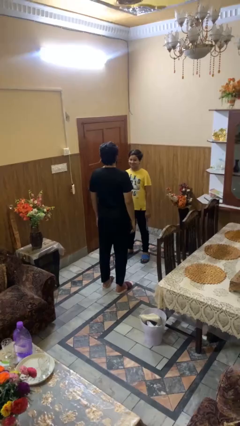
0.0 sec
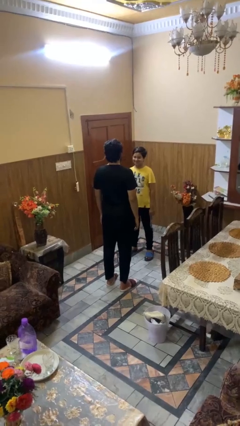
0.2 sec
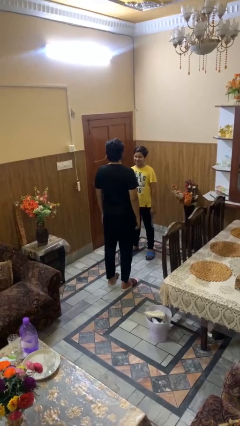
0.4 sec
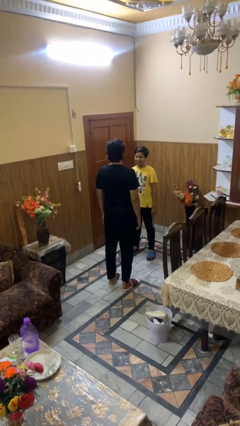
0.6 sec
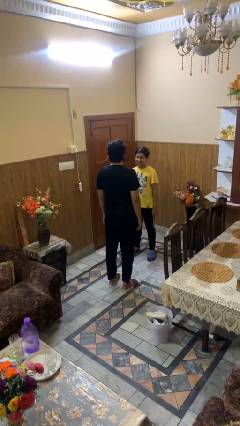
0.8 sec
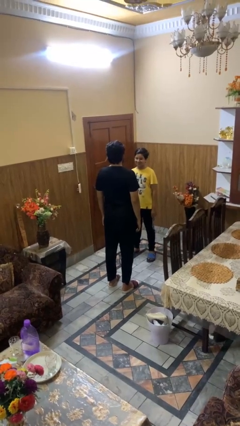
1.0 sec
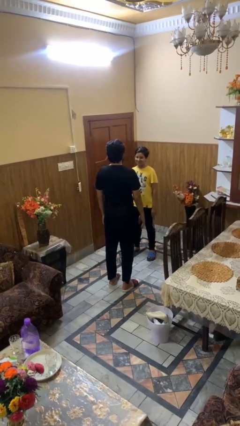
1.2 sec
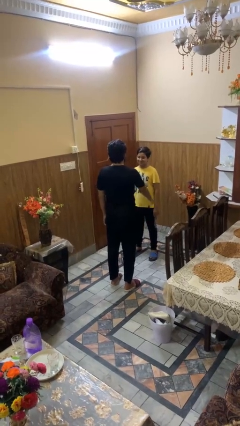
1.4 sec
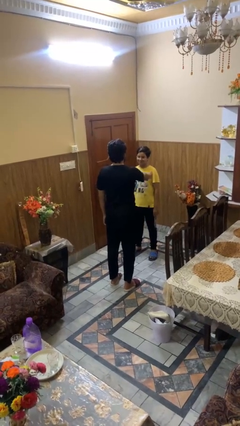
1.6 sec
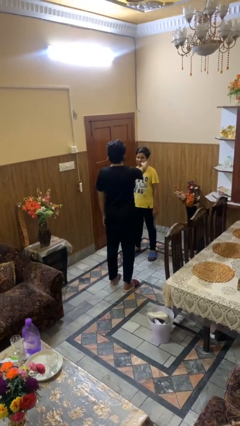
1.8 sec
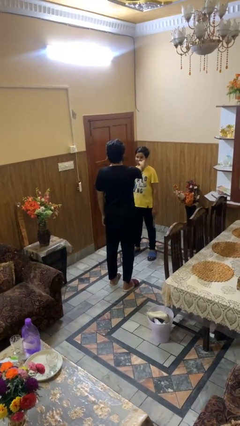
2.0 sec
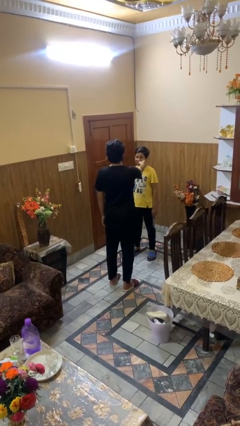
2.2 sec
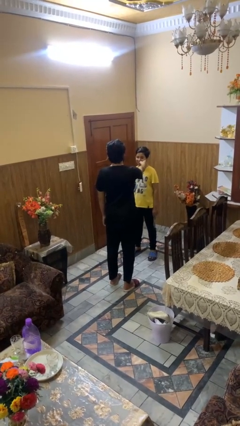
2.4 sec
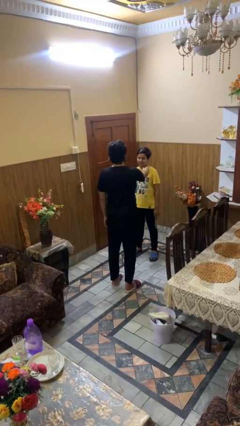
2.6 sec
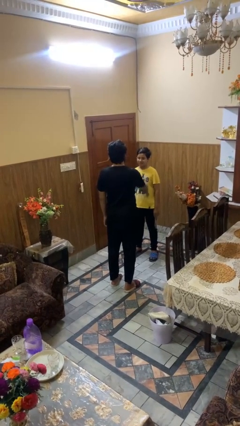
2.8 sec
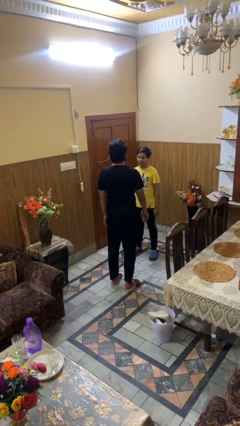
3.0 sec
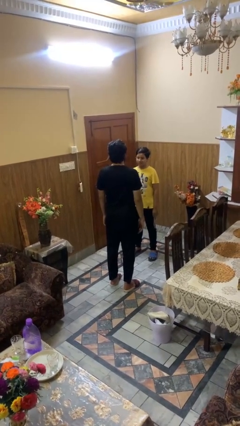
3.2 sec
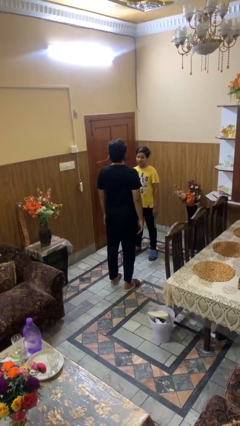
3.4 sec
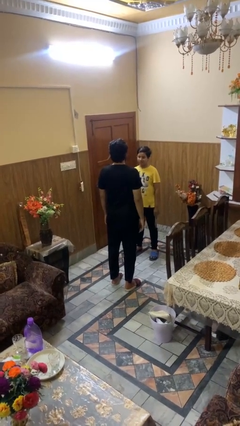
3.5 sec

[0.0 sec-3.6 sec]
person touches face of person

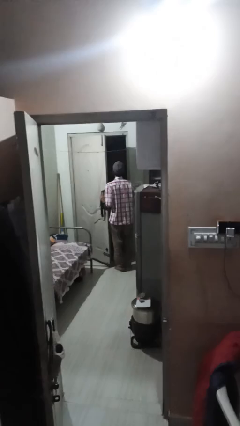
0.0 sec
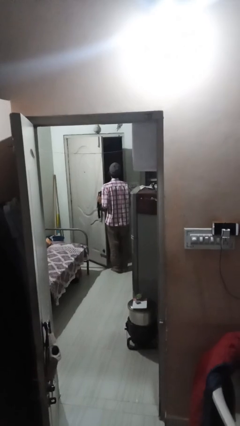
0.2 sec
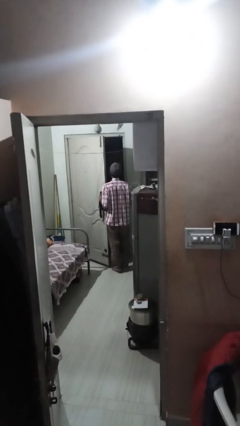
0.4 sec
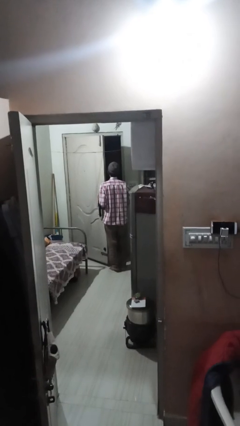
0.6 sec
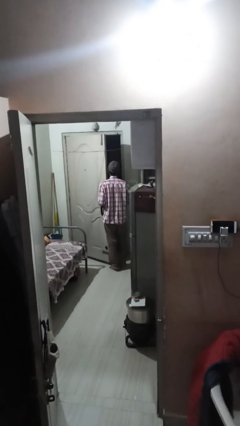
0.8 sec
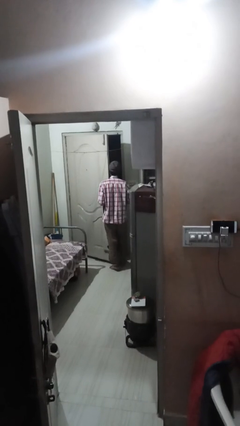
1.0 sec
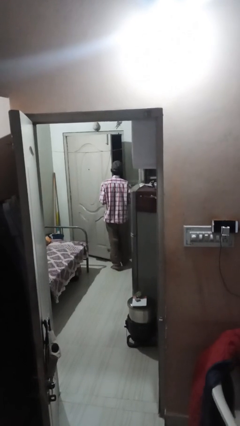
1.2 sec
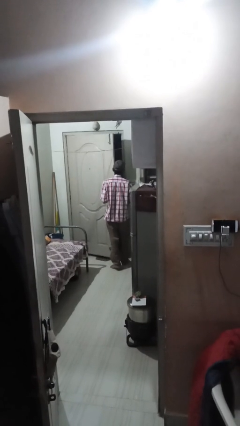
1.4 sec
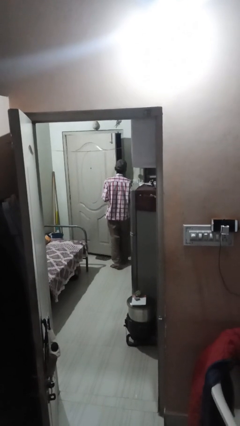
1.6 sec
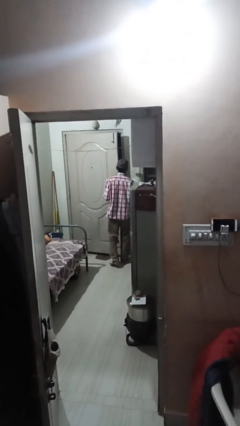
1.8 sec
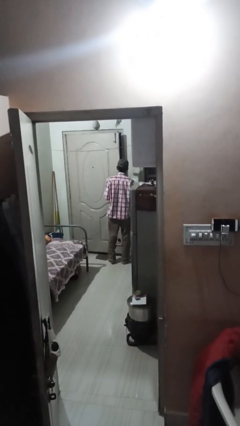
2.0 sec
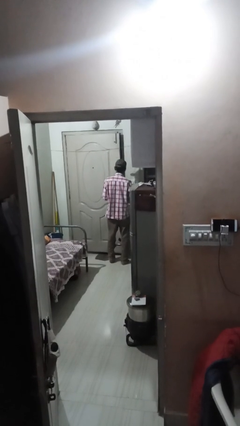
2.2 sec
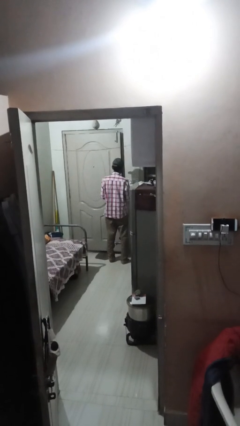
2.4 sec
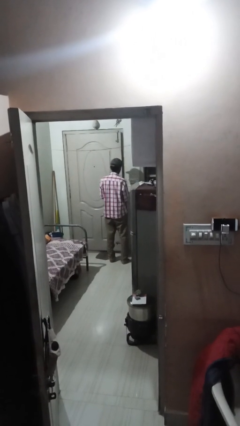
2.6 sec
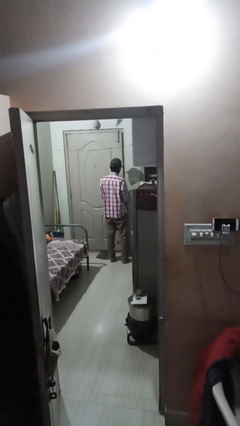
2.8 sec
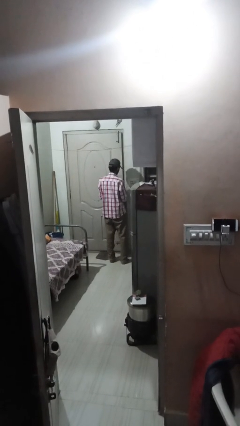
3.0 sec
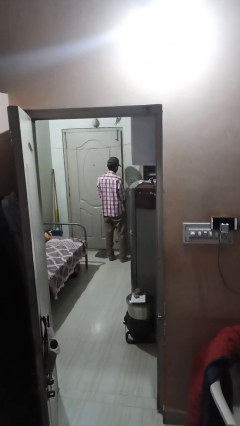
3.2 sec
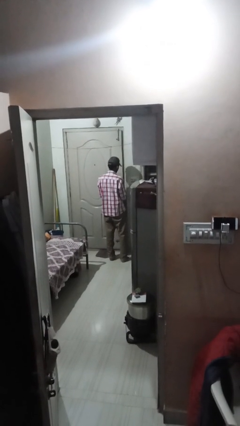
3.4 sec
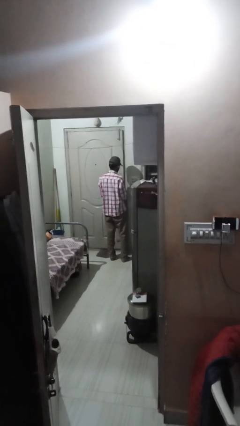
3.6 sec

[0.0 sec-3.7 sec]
person closes facility door

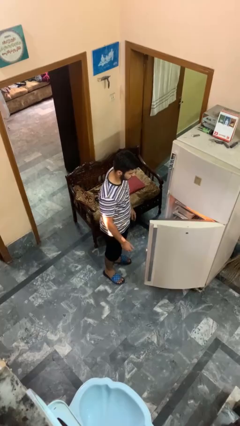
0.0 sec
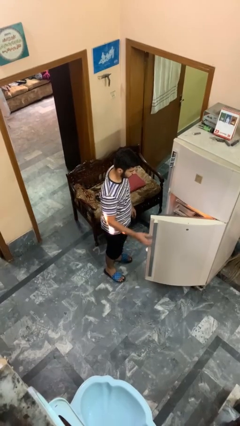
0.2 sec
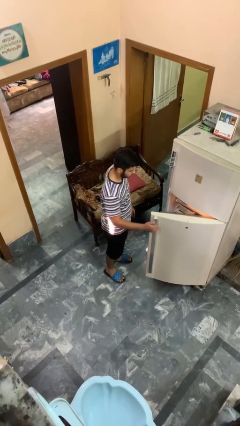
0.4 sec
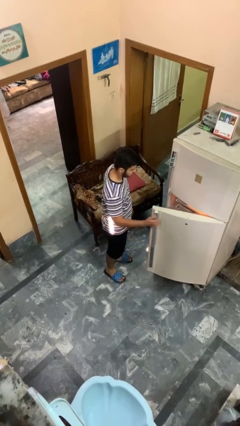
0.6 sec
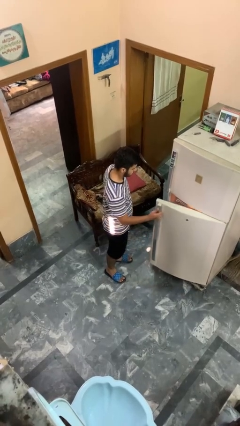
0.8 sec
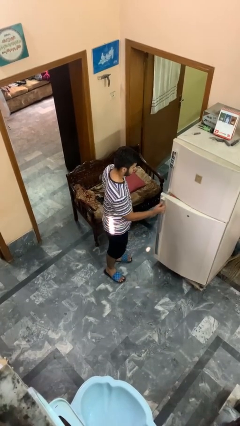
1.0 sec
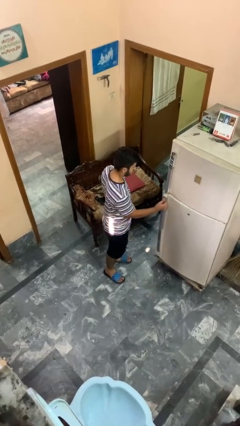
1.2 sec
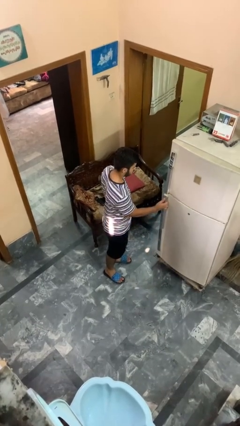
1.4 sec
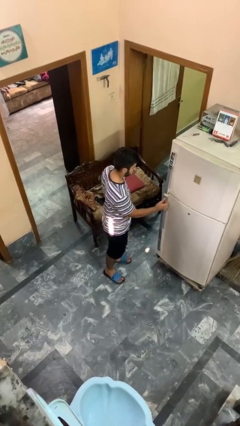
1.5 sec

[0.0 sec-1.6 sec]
person closes refrigerator

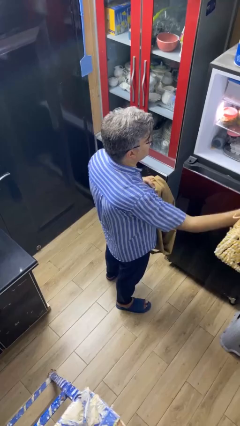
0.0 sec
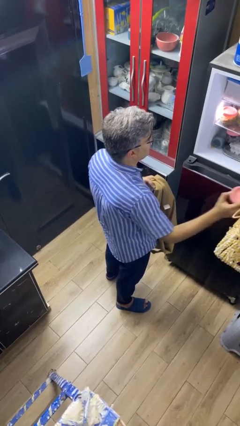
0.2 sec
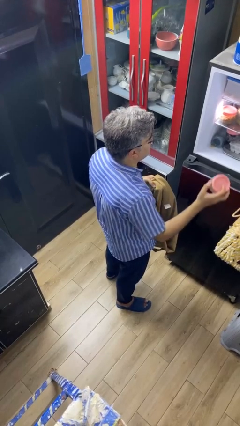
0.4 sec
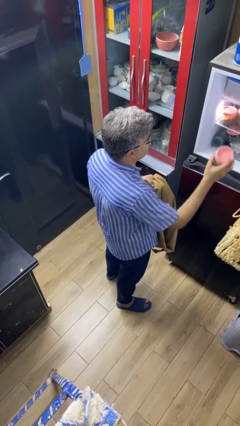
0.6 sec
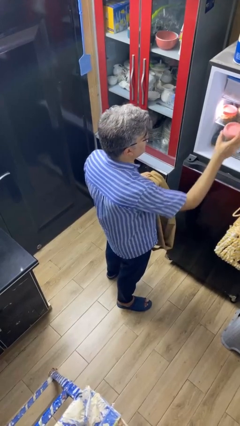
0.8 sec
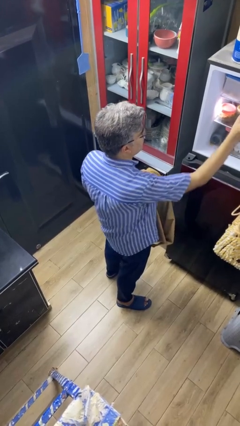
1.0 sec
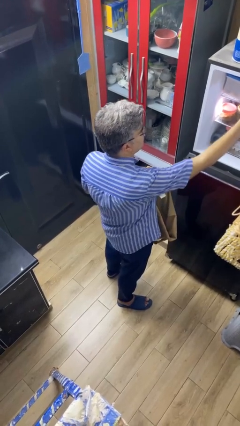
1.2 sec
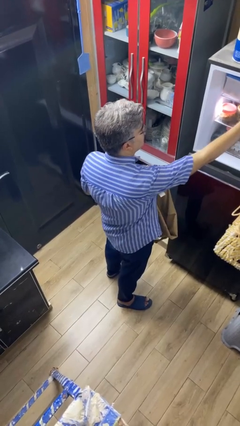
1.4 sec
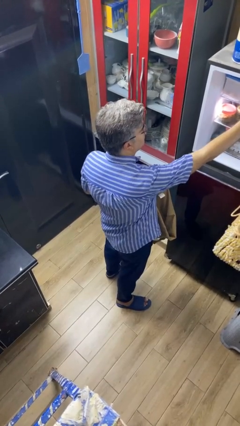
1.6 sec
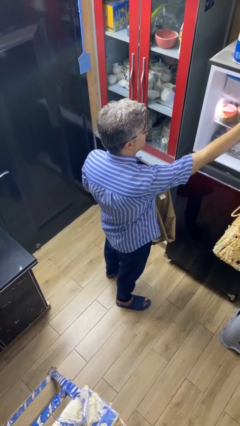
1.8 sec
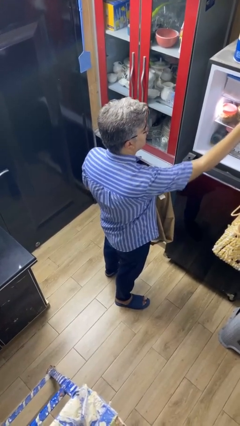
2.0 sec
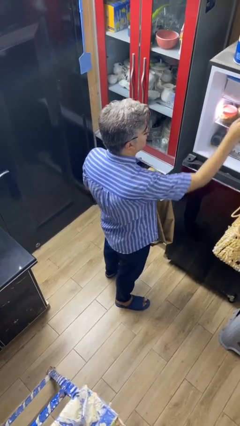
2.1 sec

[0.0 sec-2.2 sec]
person loads groceries into refrigerator

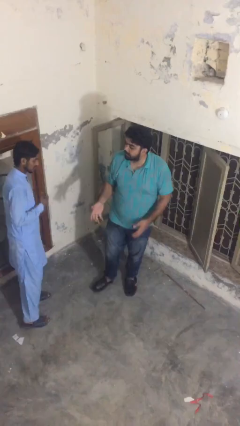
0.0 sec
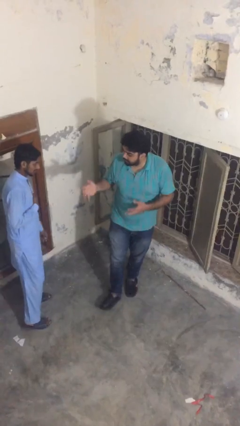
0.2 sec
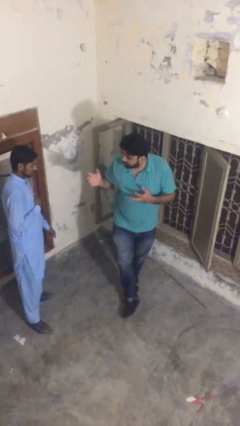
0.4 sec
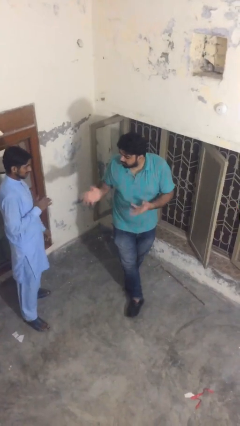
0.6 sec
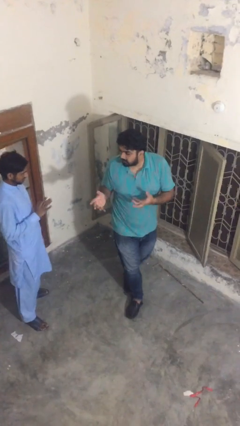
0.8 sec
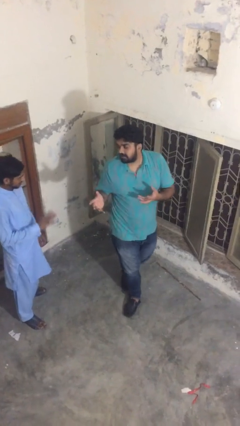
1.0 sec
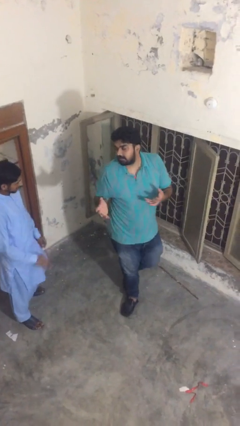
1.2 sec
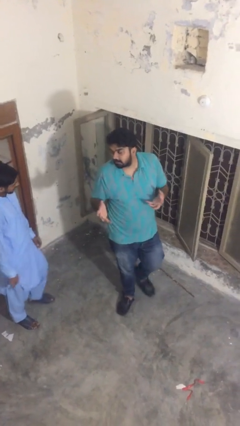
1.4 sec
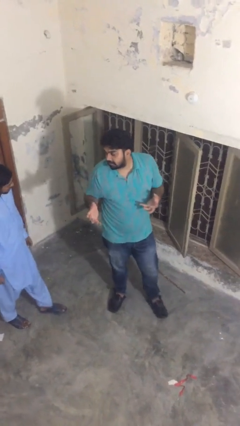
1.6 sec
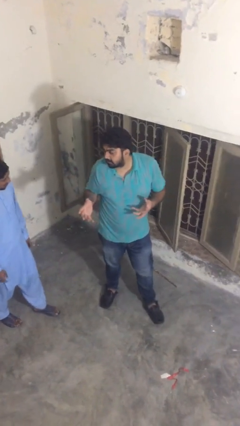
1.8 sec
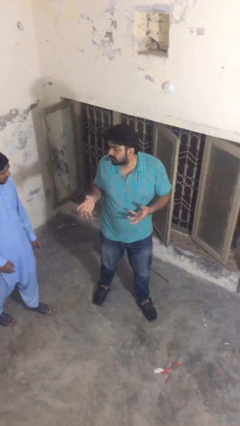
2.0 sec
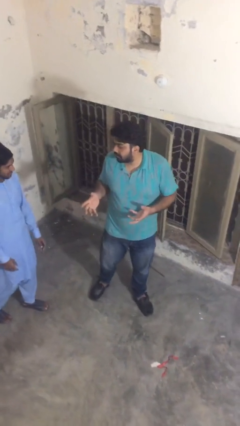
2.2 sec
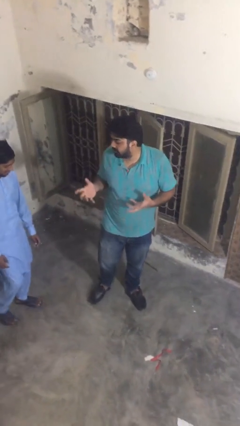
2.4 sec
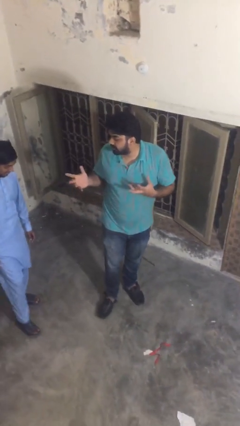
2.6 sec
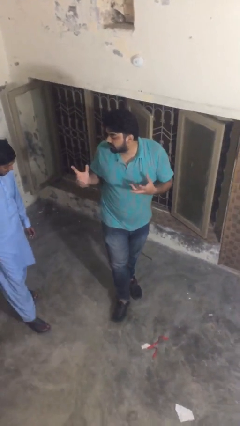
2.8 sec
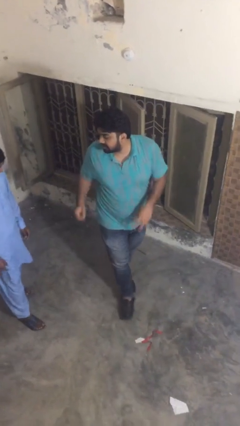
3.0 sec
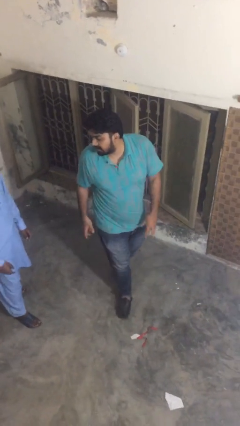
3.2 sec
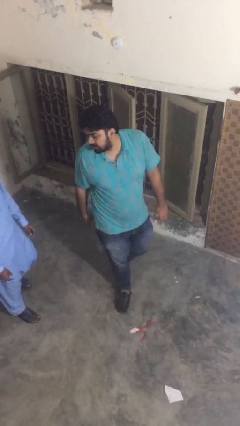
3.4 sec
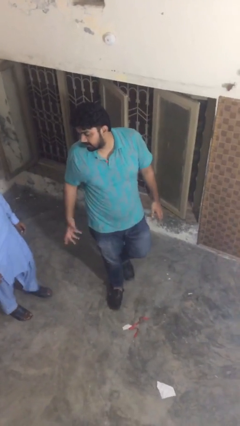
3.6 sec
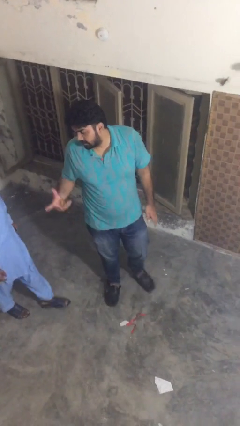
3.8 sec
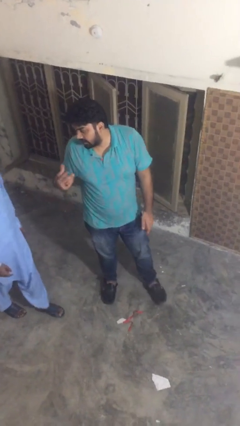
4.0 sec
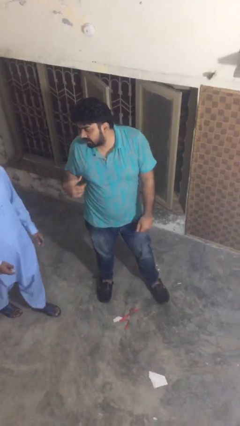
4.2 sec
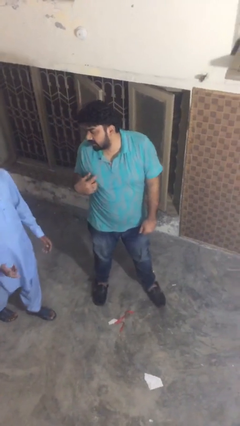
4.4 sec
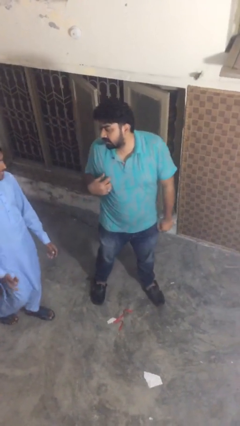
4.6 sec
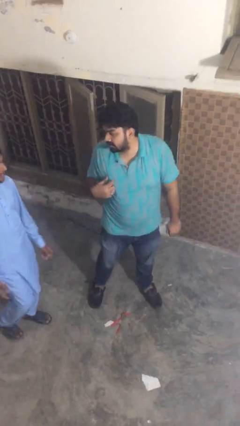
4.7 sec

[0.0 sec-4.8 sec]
person talks to person

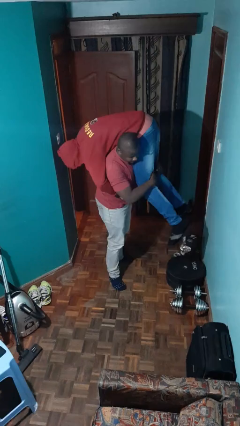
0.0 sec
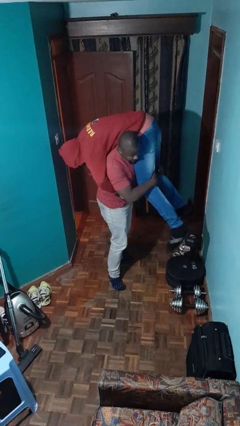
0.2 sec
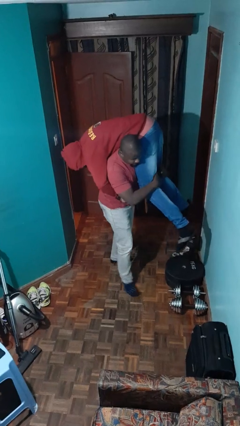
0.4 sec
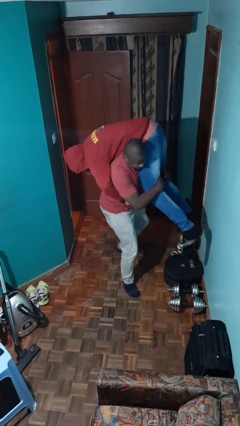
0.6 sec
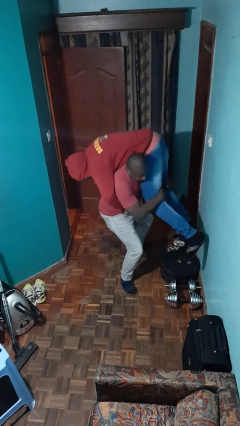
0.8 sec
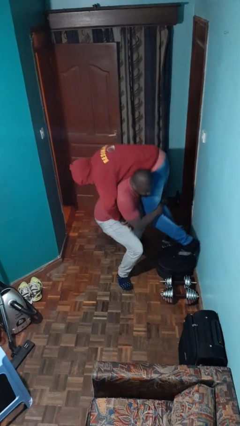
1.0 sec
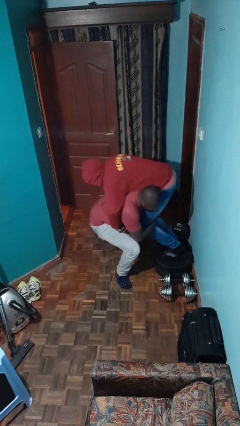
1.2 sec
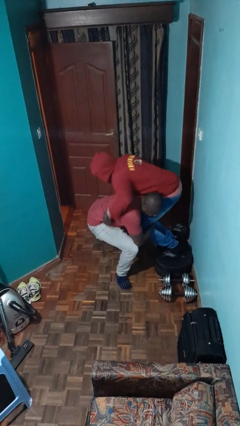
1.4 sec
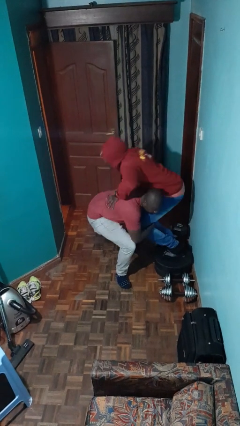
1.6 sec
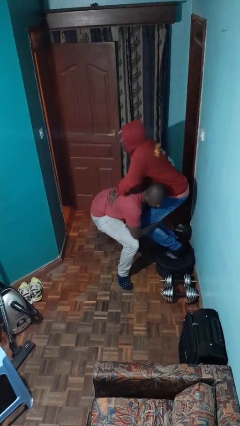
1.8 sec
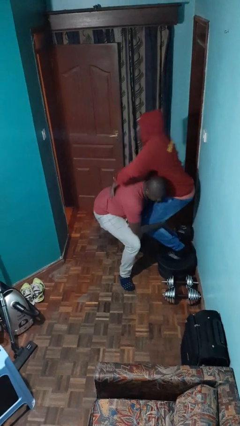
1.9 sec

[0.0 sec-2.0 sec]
person puts down person
